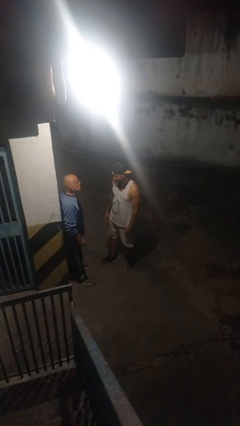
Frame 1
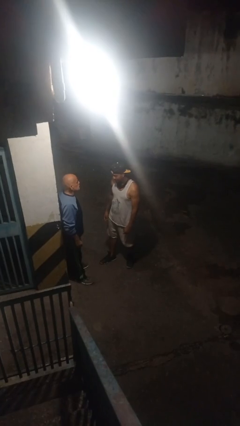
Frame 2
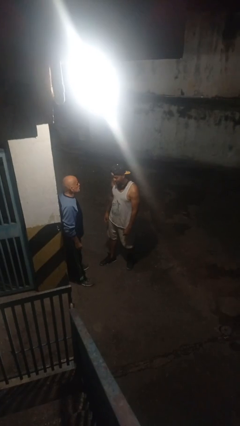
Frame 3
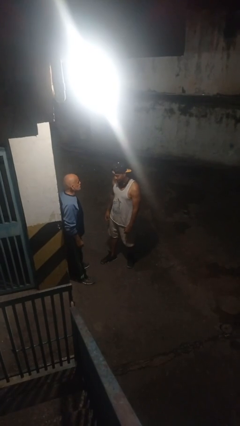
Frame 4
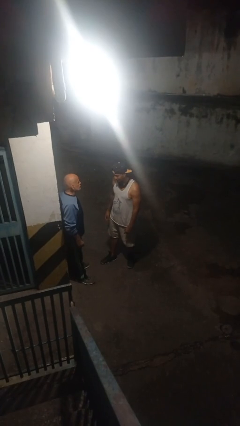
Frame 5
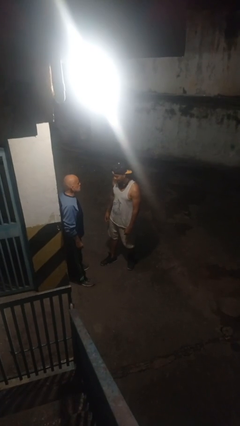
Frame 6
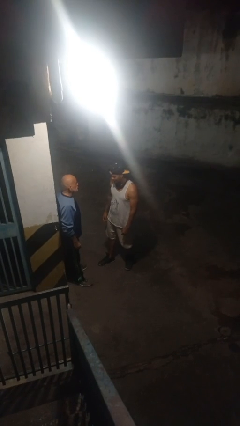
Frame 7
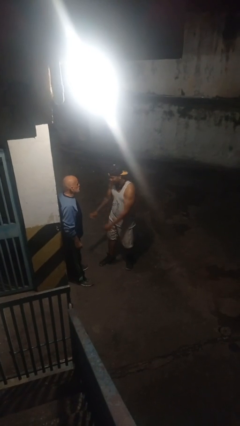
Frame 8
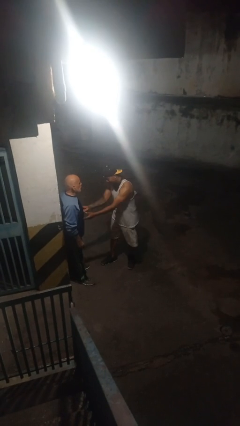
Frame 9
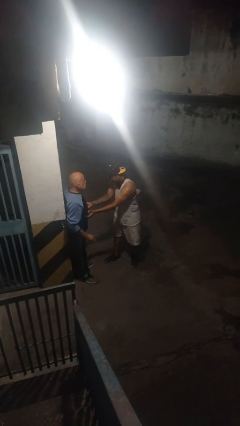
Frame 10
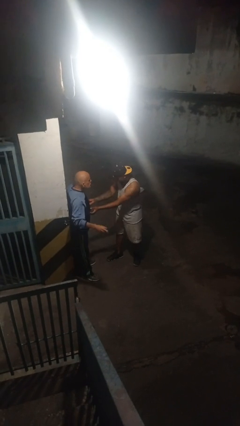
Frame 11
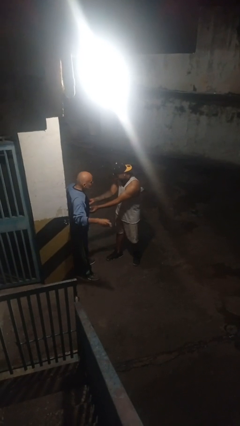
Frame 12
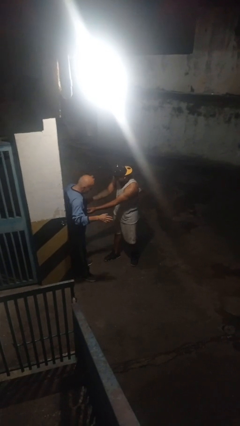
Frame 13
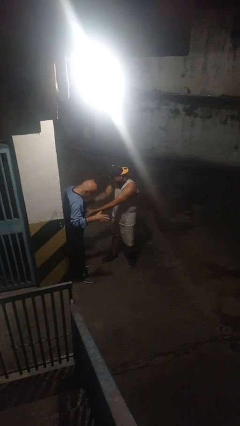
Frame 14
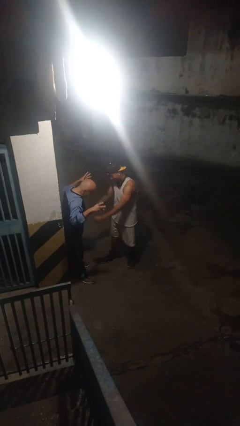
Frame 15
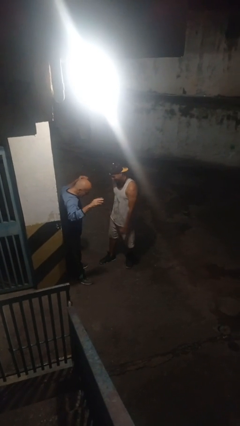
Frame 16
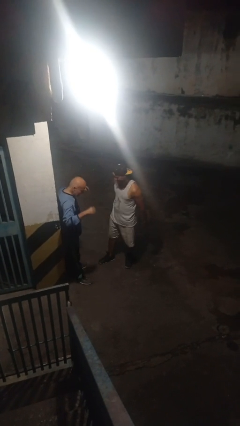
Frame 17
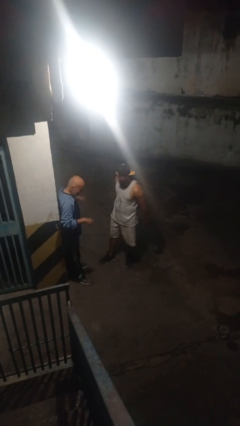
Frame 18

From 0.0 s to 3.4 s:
person tickles person

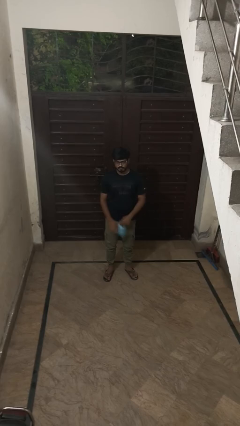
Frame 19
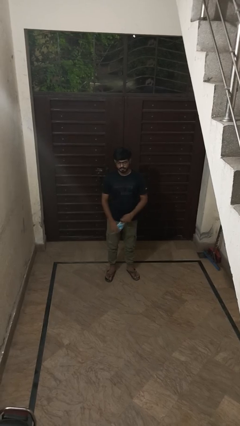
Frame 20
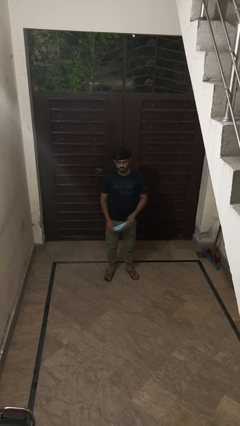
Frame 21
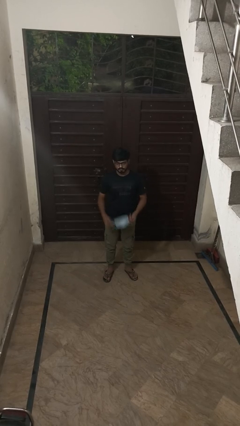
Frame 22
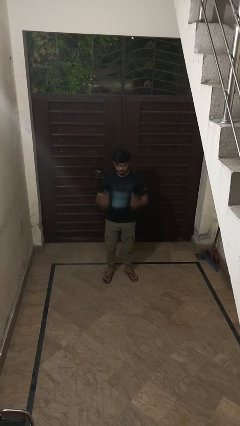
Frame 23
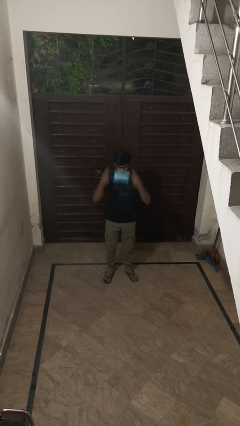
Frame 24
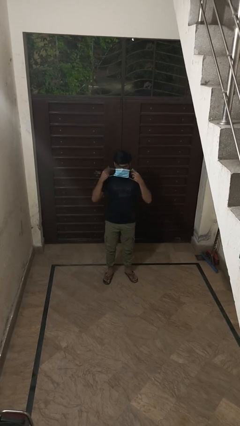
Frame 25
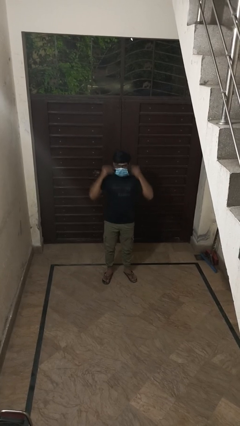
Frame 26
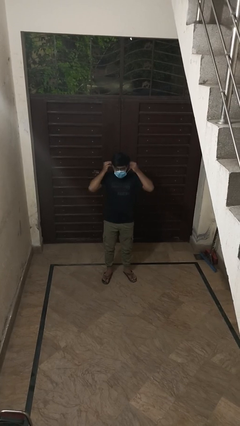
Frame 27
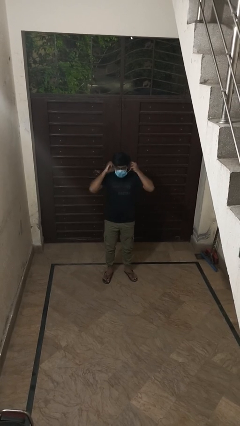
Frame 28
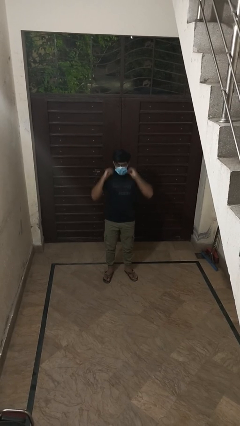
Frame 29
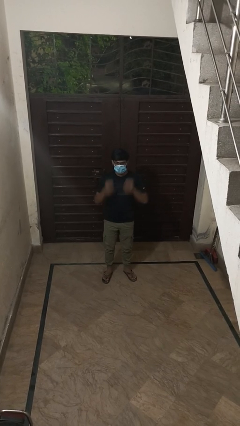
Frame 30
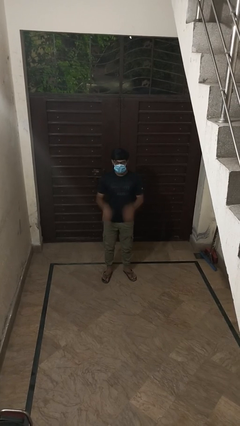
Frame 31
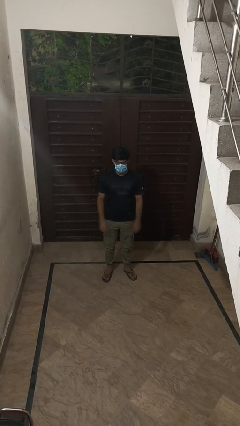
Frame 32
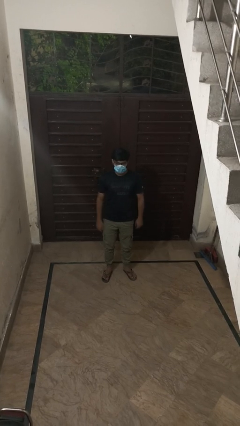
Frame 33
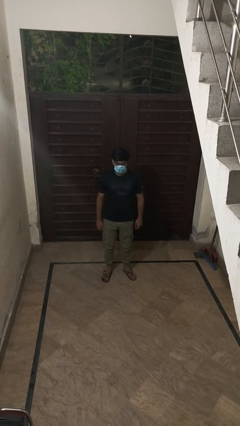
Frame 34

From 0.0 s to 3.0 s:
person puts on facemask

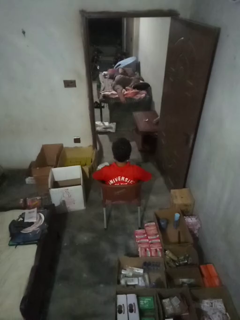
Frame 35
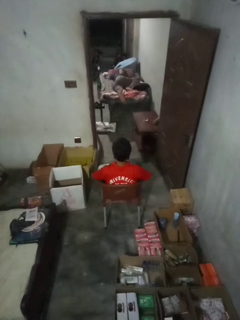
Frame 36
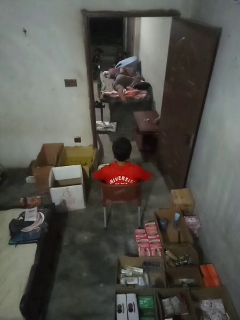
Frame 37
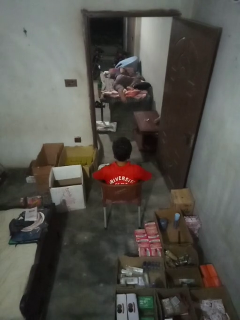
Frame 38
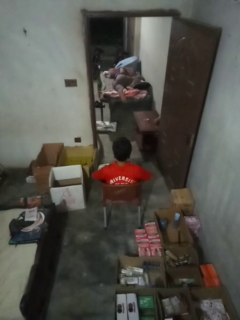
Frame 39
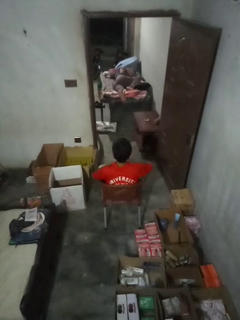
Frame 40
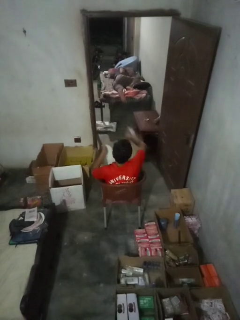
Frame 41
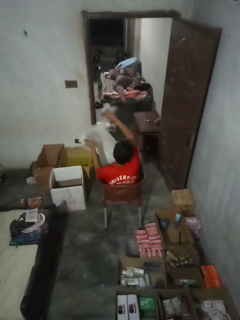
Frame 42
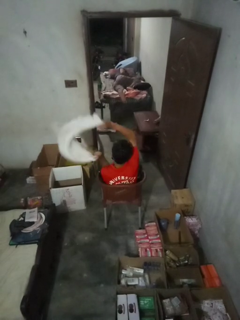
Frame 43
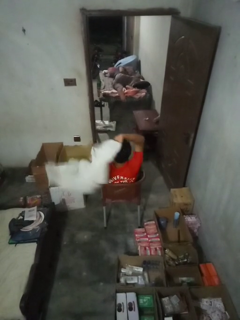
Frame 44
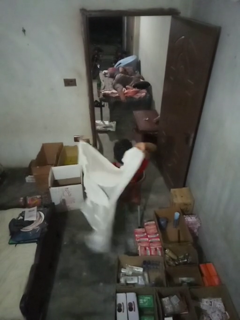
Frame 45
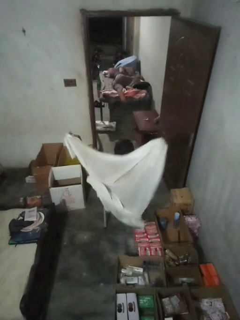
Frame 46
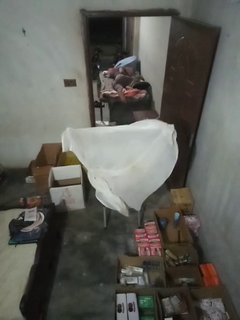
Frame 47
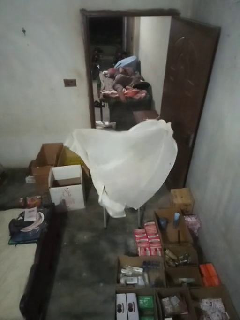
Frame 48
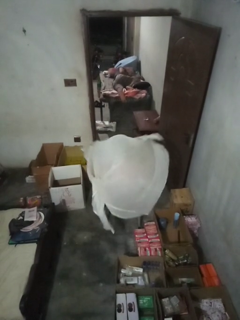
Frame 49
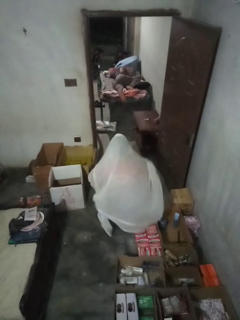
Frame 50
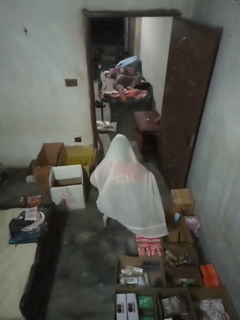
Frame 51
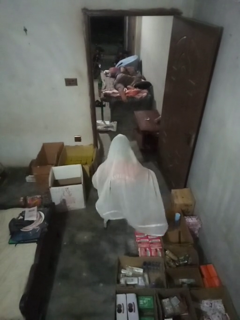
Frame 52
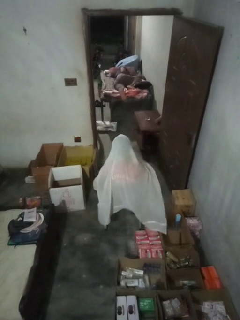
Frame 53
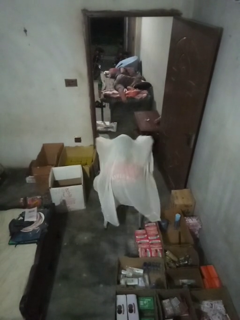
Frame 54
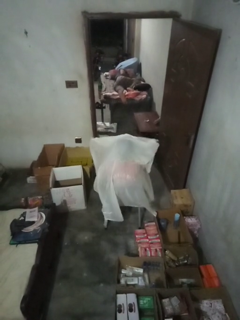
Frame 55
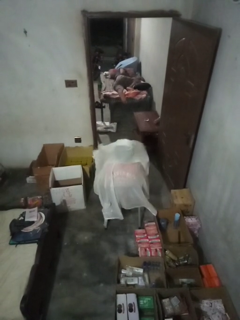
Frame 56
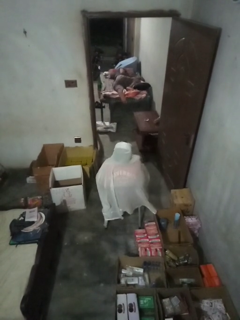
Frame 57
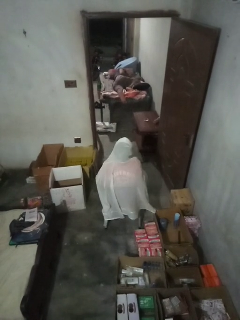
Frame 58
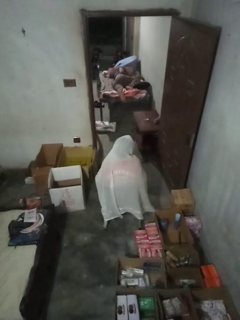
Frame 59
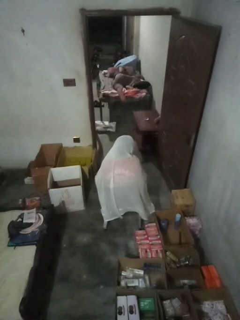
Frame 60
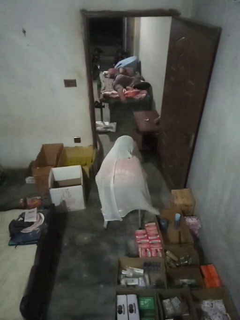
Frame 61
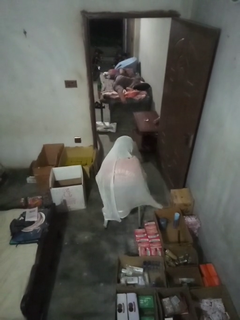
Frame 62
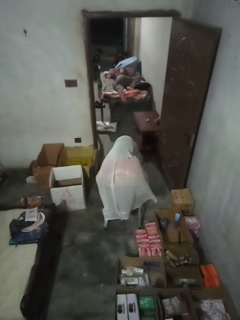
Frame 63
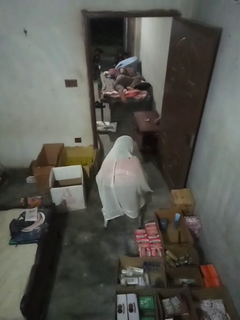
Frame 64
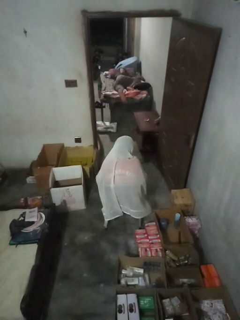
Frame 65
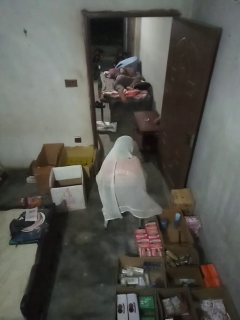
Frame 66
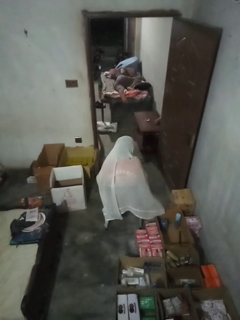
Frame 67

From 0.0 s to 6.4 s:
person covers with blanket

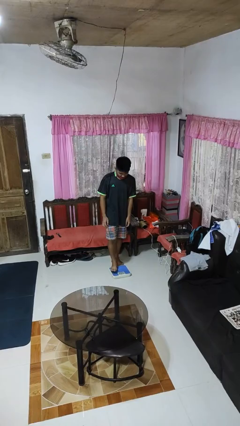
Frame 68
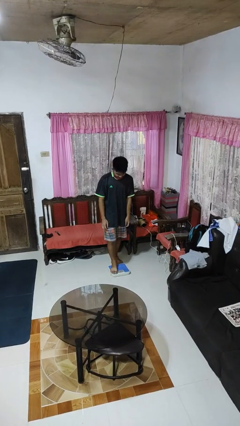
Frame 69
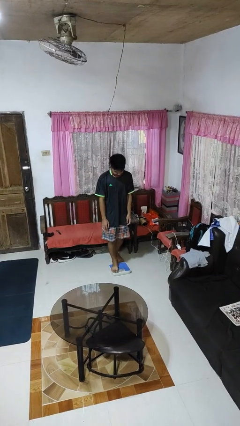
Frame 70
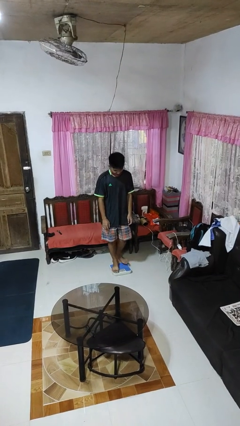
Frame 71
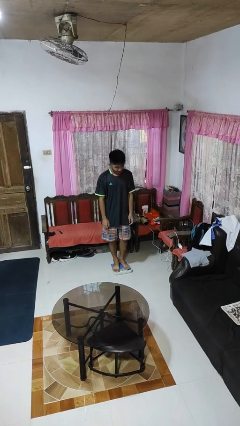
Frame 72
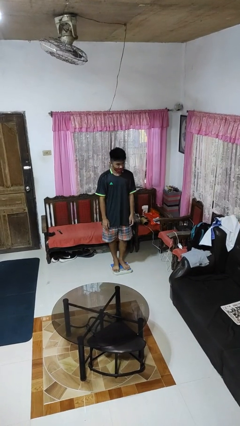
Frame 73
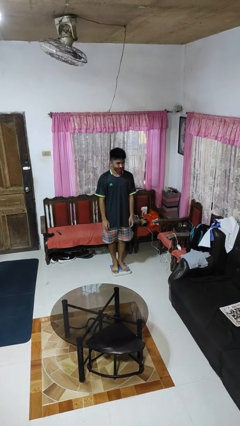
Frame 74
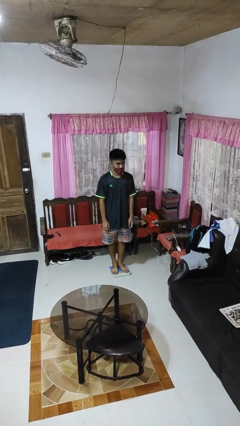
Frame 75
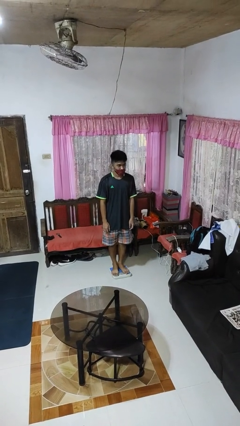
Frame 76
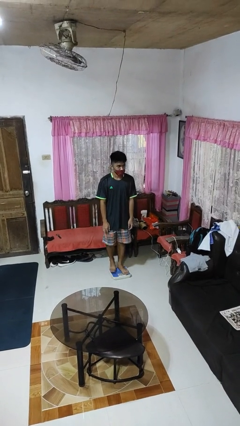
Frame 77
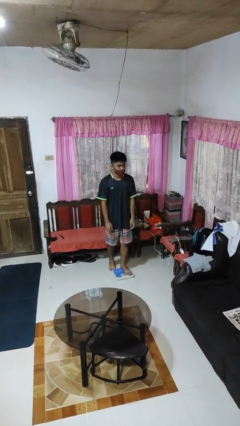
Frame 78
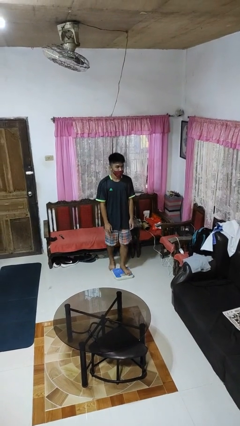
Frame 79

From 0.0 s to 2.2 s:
person uses bodyweight scale

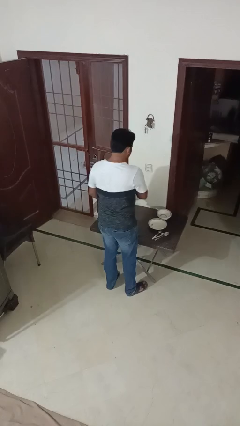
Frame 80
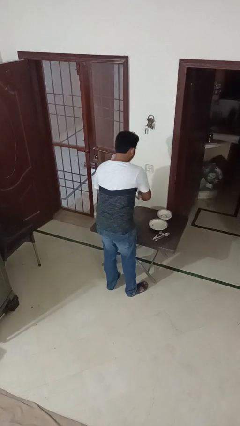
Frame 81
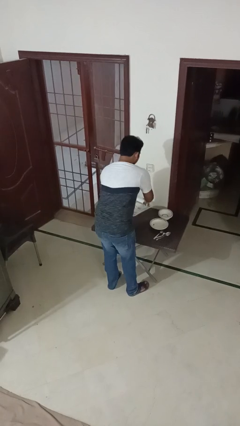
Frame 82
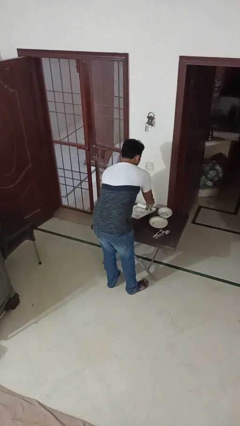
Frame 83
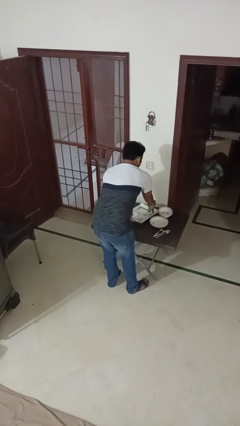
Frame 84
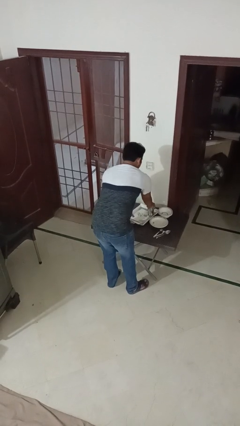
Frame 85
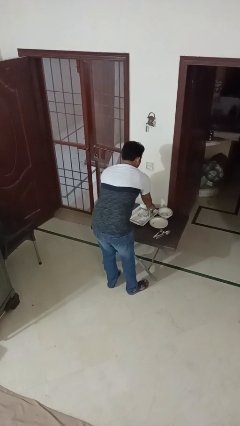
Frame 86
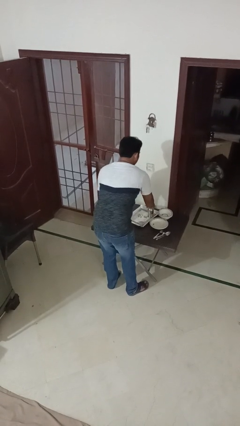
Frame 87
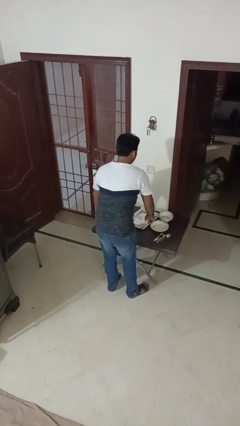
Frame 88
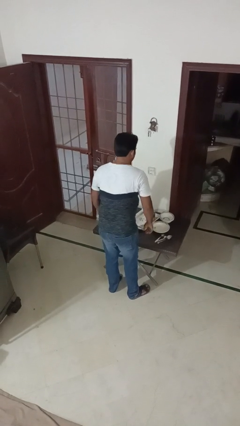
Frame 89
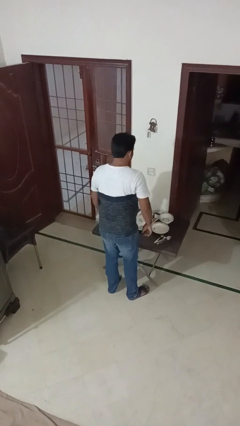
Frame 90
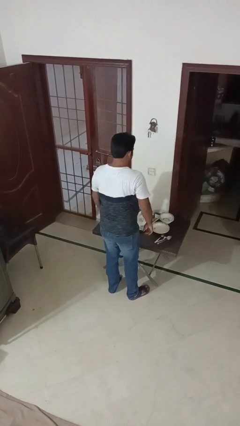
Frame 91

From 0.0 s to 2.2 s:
person sets table

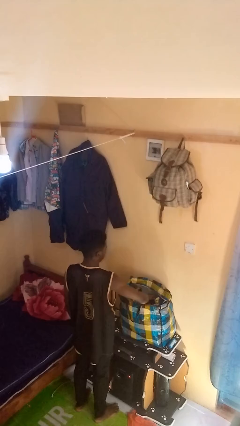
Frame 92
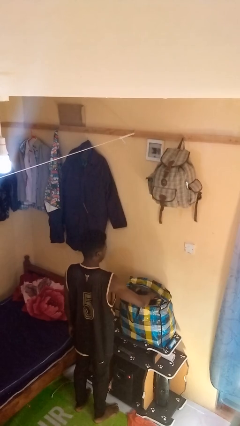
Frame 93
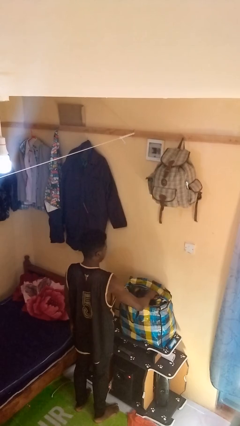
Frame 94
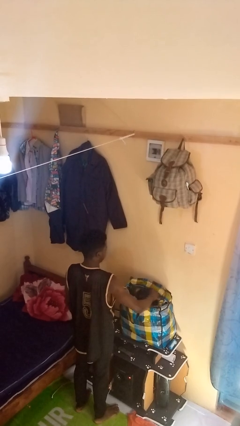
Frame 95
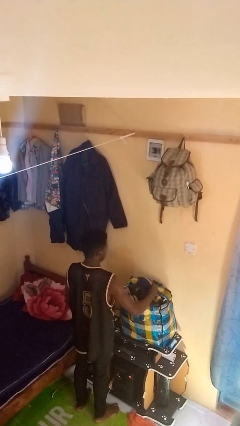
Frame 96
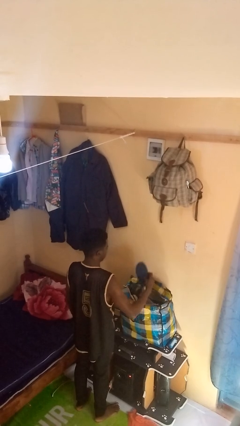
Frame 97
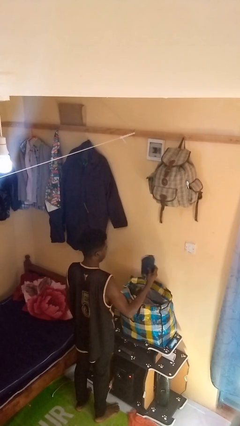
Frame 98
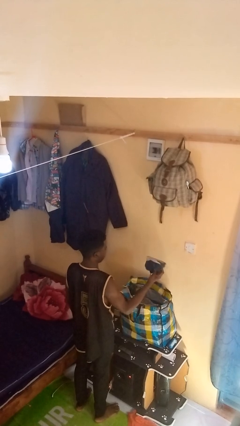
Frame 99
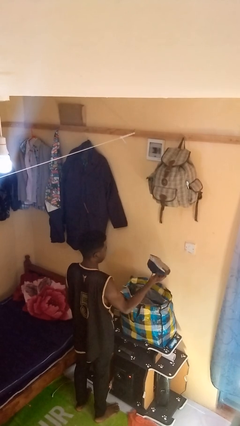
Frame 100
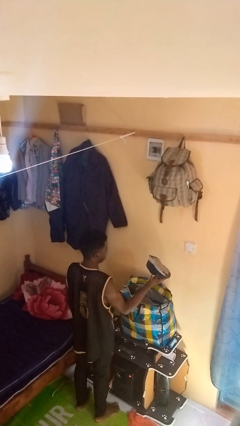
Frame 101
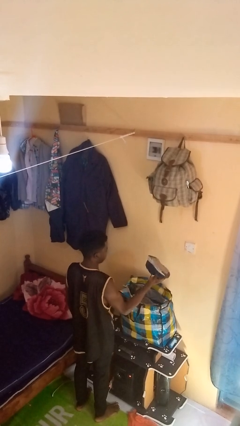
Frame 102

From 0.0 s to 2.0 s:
person takes object from bag
